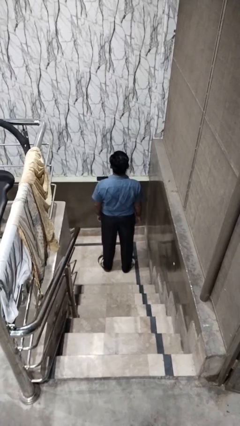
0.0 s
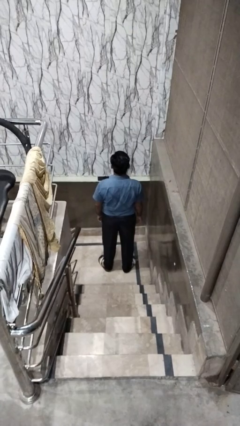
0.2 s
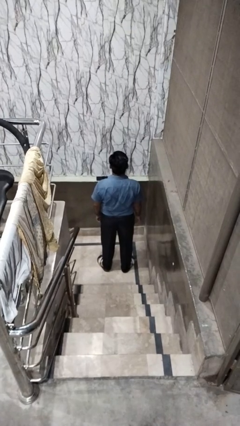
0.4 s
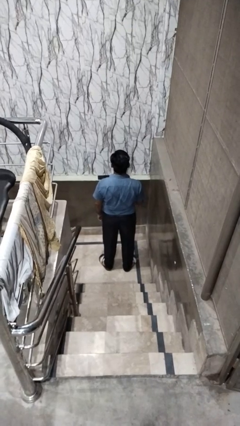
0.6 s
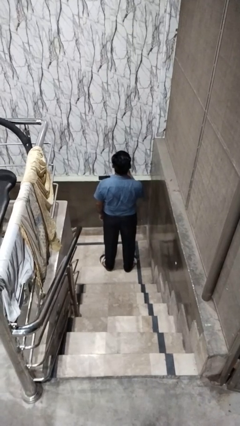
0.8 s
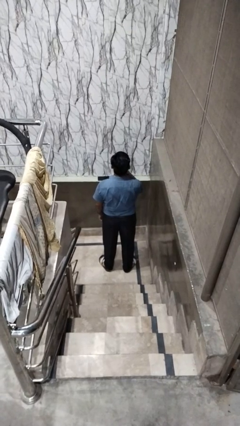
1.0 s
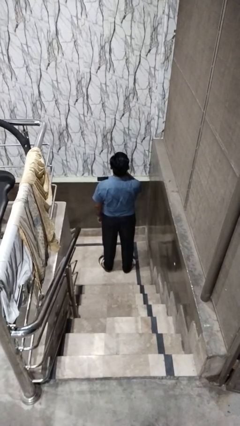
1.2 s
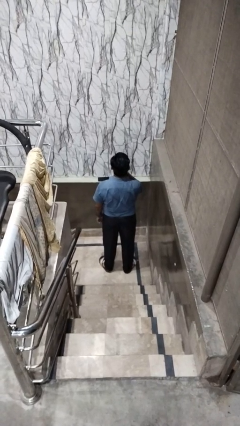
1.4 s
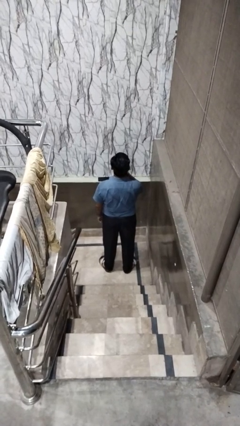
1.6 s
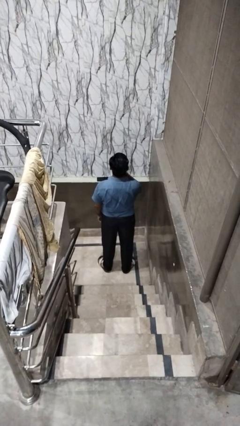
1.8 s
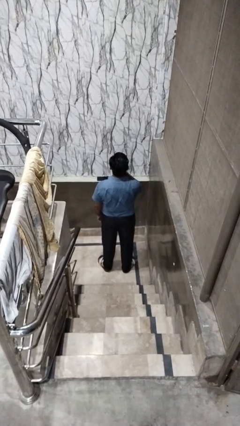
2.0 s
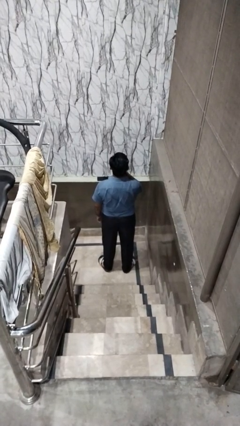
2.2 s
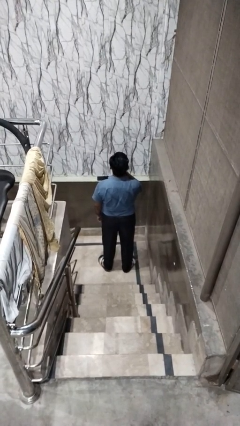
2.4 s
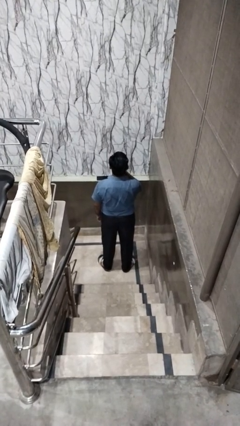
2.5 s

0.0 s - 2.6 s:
person gestures be quiet

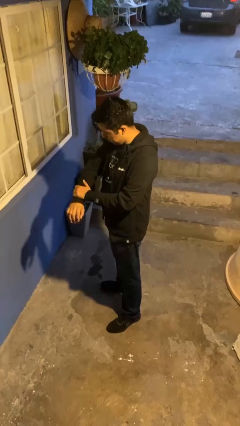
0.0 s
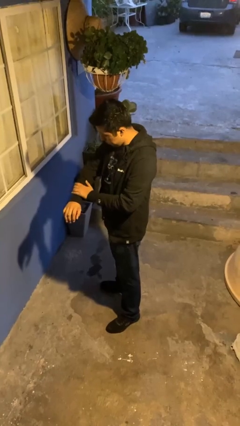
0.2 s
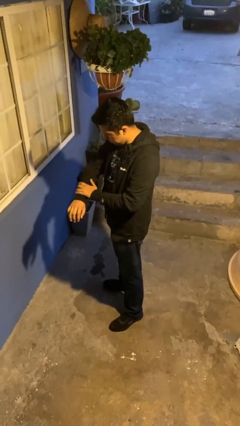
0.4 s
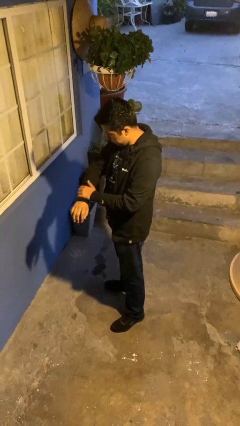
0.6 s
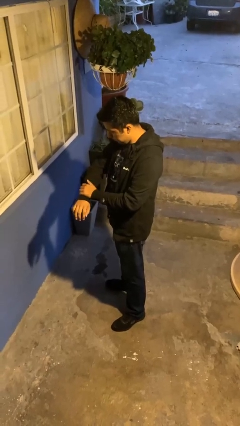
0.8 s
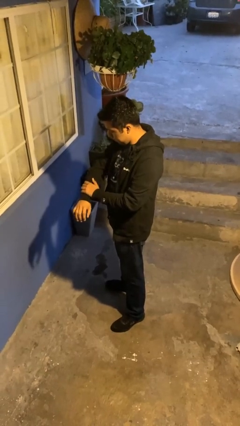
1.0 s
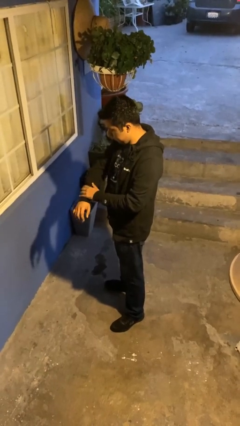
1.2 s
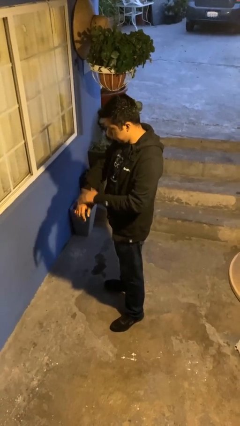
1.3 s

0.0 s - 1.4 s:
person swats bug

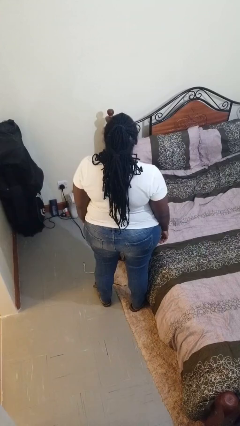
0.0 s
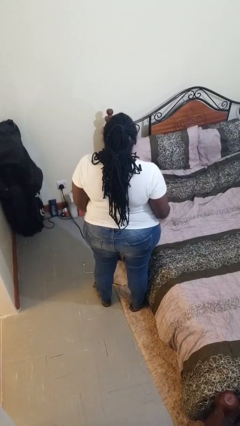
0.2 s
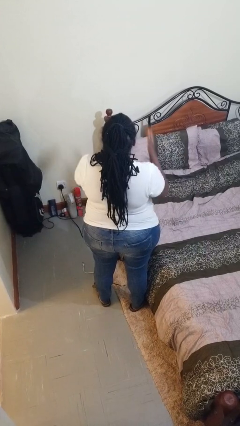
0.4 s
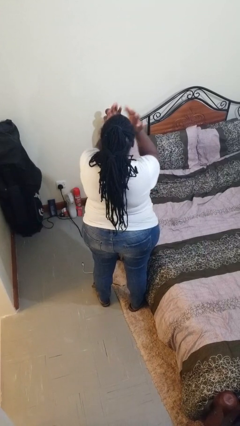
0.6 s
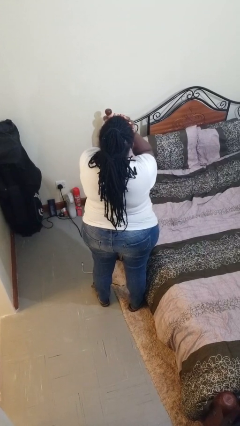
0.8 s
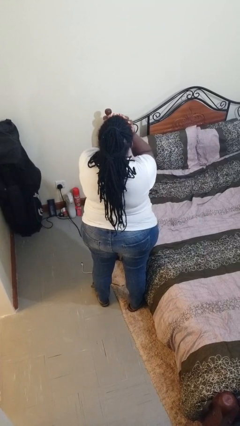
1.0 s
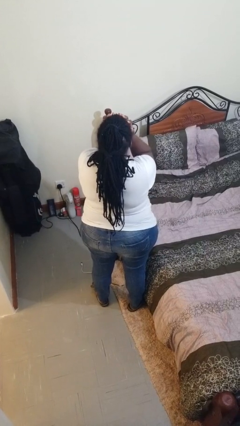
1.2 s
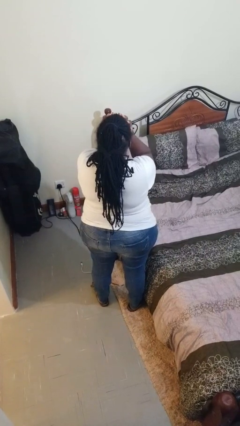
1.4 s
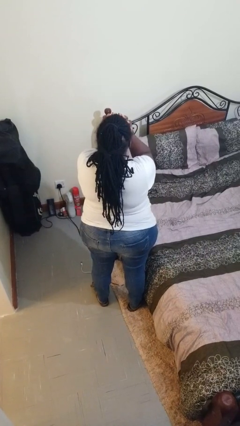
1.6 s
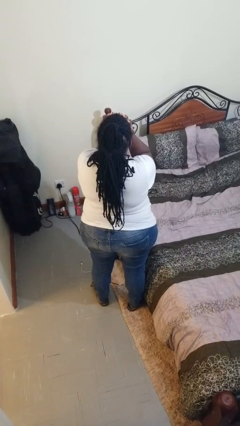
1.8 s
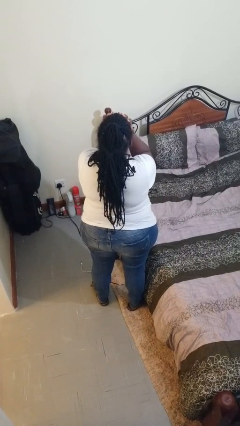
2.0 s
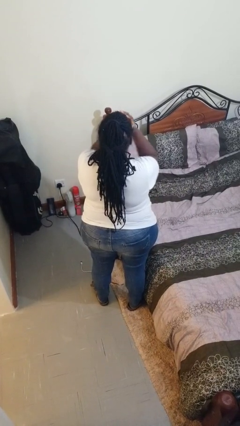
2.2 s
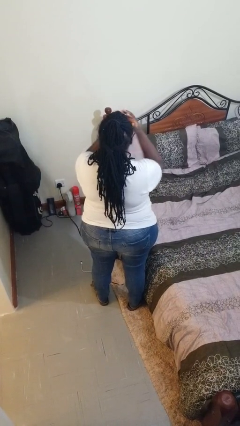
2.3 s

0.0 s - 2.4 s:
person covers face with hands

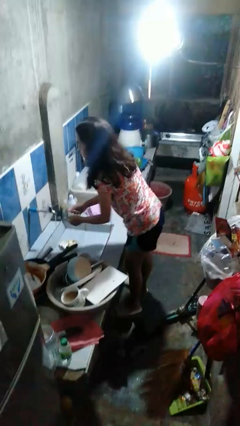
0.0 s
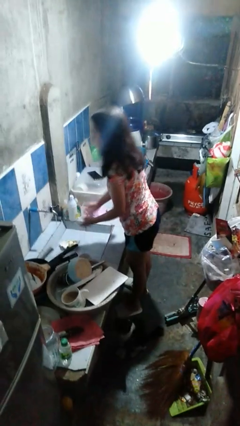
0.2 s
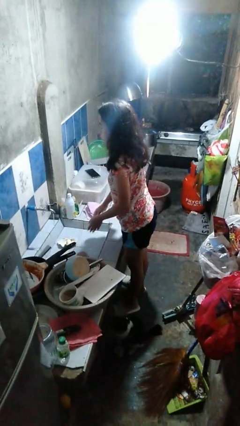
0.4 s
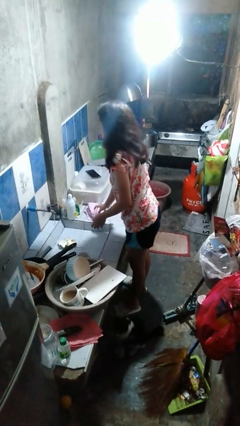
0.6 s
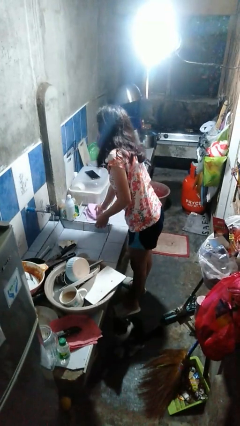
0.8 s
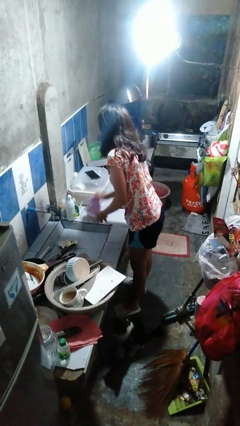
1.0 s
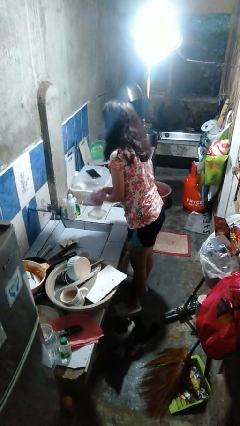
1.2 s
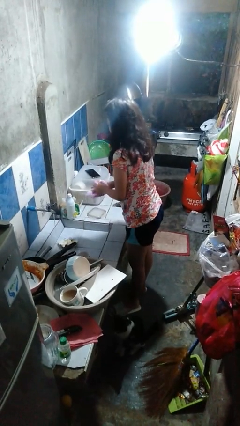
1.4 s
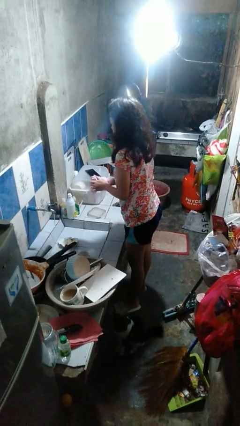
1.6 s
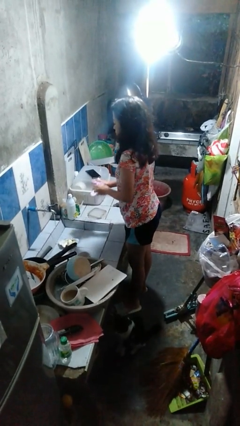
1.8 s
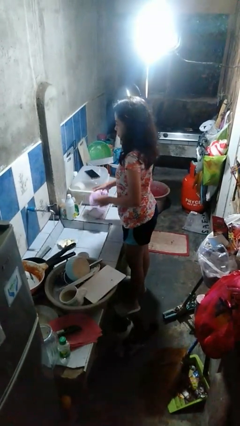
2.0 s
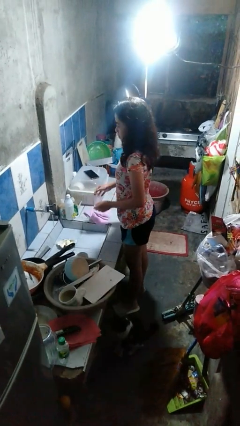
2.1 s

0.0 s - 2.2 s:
person dries hands with towel

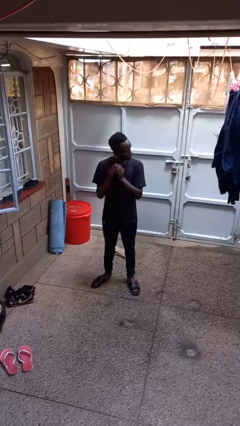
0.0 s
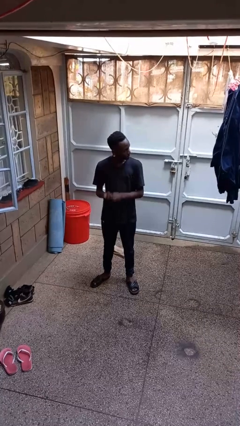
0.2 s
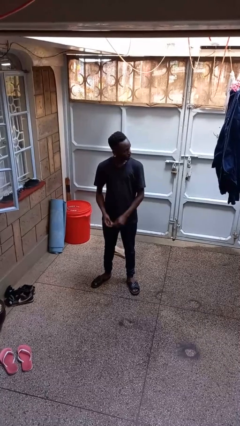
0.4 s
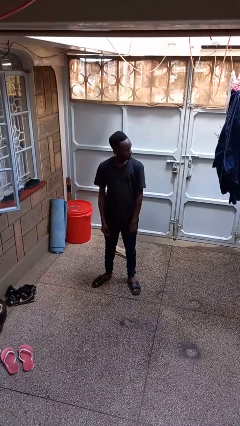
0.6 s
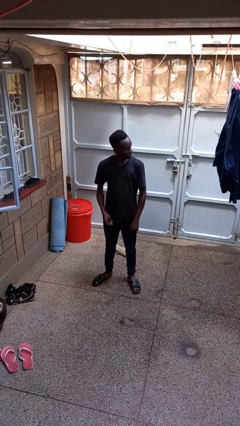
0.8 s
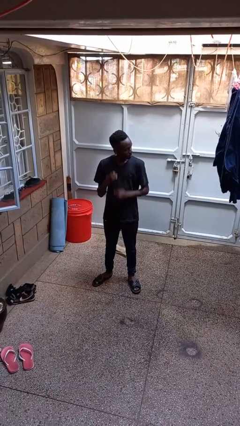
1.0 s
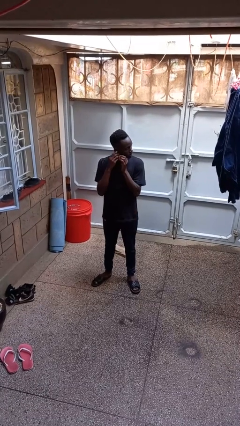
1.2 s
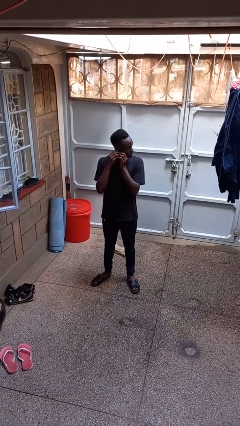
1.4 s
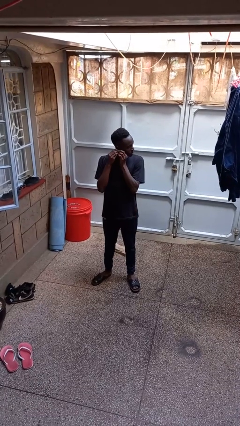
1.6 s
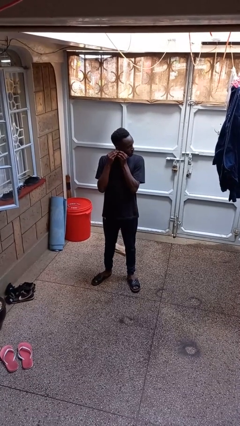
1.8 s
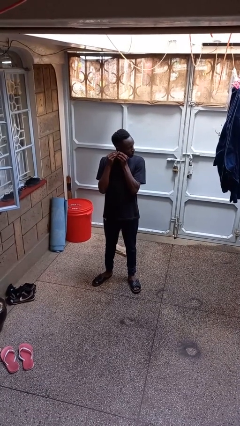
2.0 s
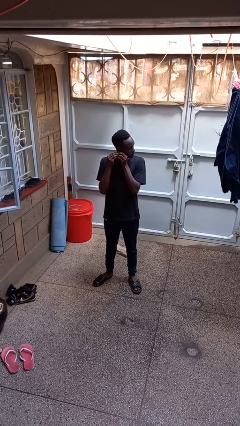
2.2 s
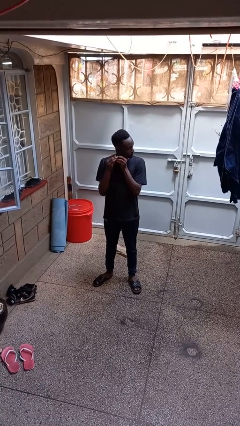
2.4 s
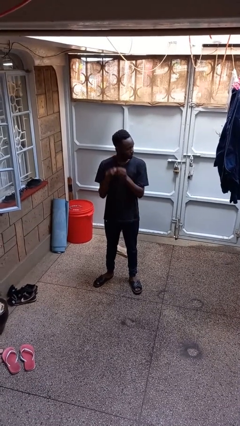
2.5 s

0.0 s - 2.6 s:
person takes off earrings

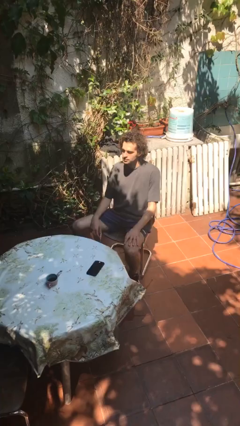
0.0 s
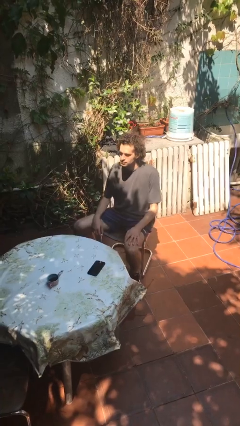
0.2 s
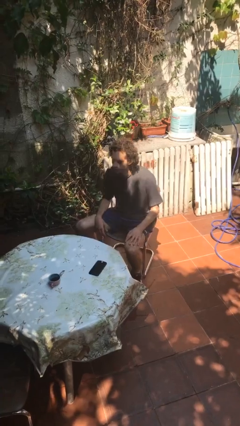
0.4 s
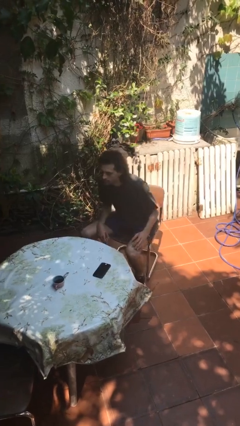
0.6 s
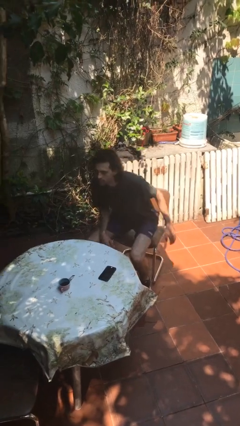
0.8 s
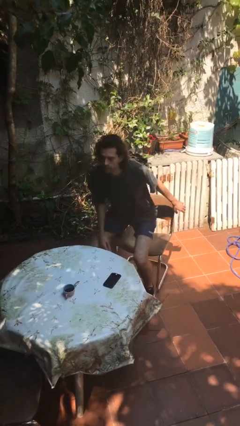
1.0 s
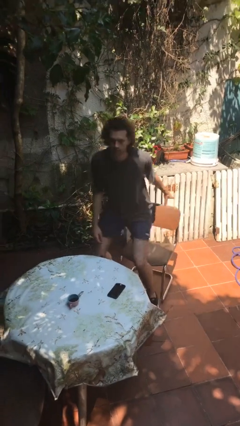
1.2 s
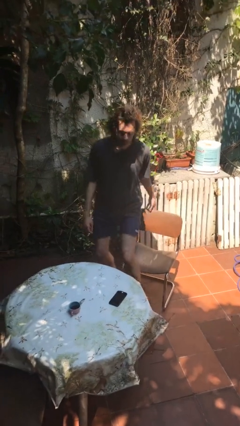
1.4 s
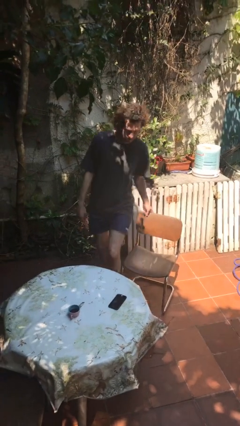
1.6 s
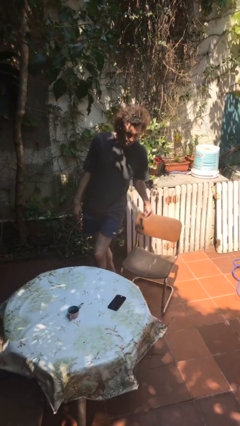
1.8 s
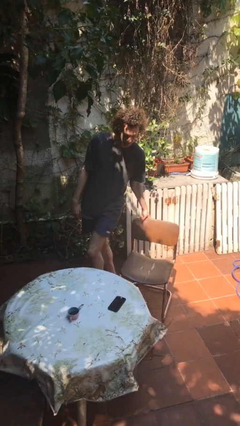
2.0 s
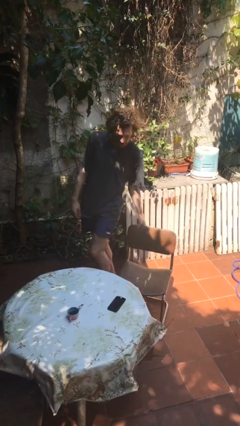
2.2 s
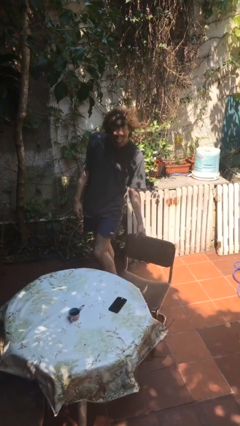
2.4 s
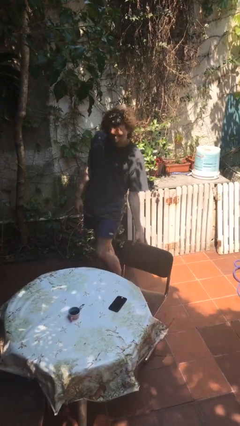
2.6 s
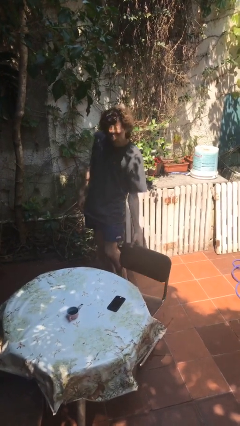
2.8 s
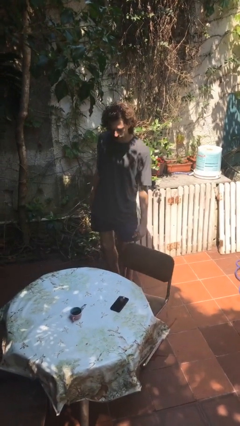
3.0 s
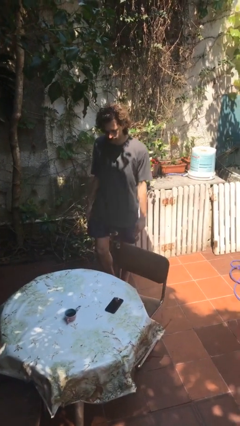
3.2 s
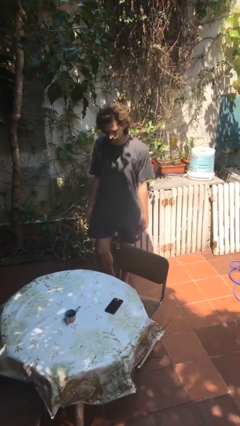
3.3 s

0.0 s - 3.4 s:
person stands up

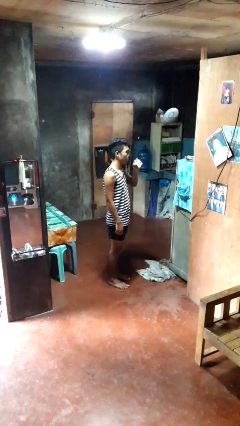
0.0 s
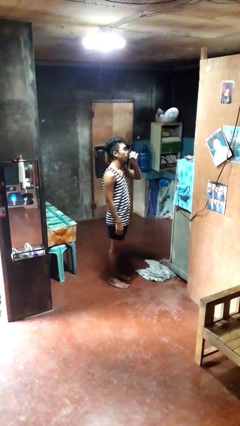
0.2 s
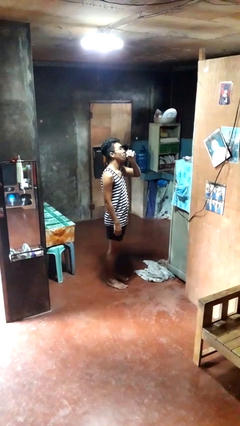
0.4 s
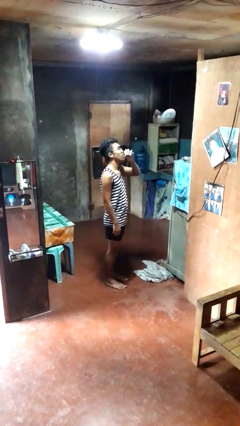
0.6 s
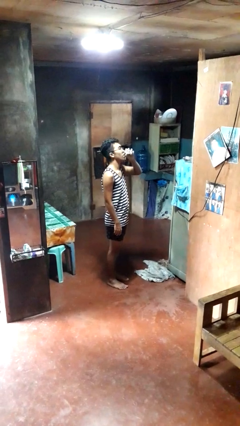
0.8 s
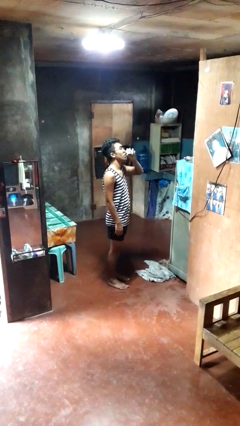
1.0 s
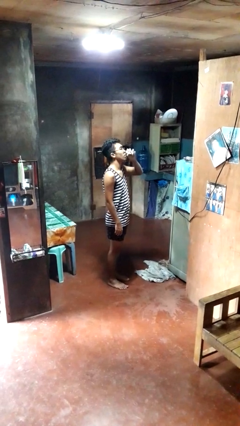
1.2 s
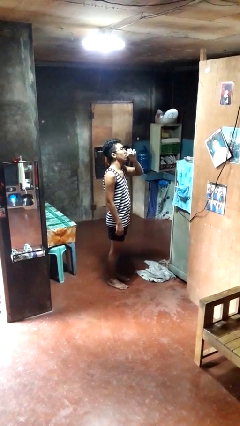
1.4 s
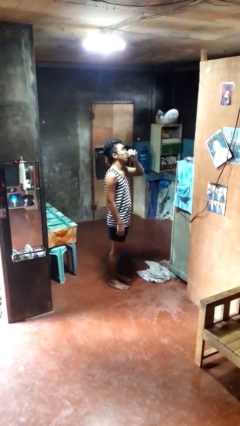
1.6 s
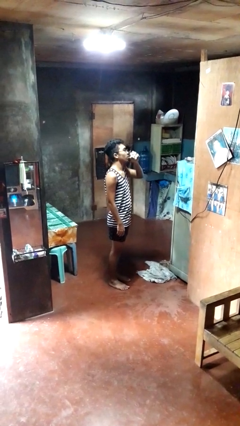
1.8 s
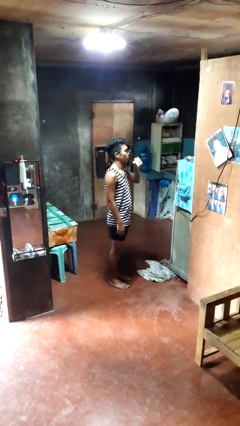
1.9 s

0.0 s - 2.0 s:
person drinks from beverage can

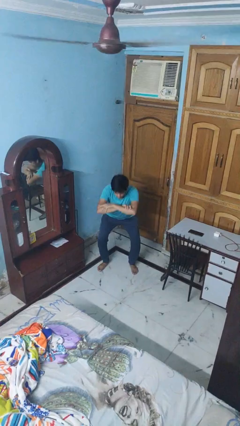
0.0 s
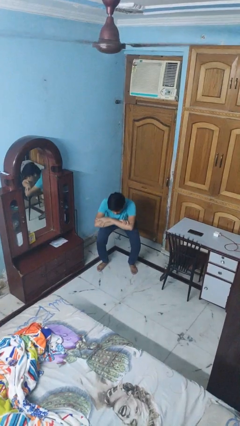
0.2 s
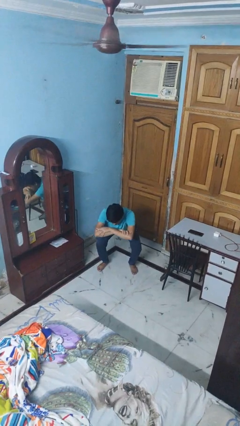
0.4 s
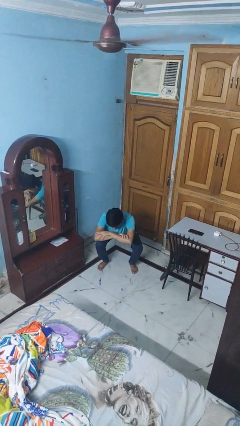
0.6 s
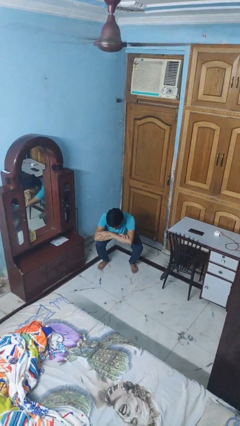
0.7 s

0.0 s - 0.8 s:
person squats
